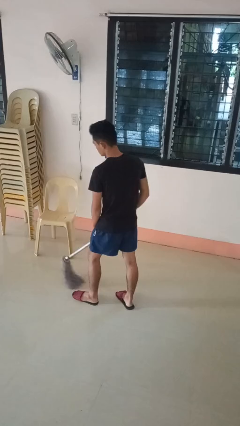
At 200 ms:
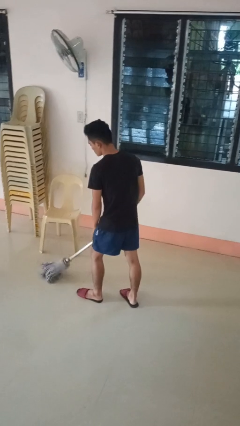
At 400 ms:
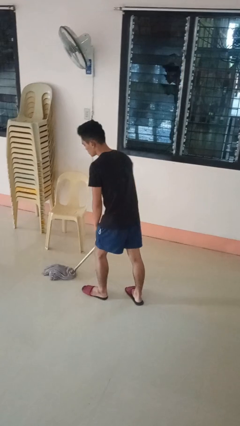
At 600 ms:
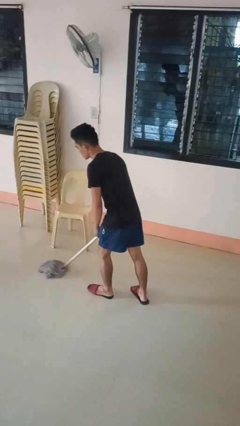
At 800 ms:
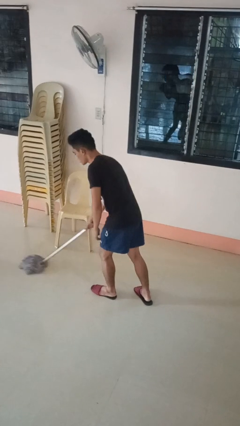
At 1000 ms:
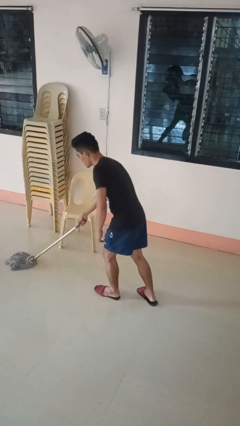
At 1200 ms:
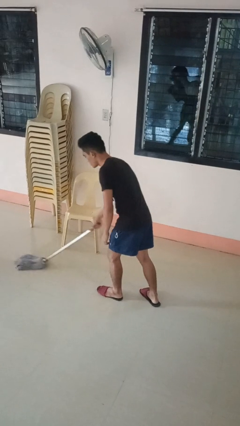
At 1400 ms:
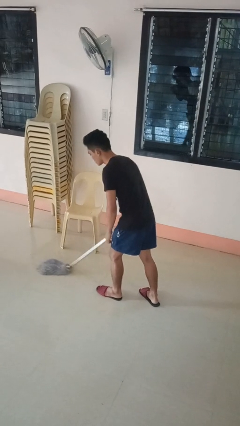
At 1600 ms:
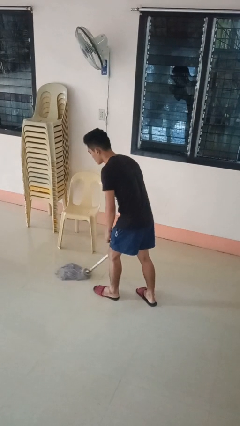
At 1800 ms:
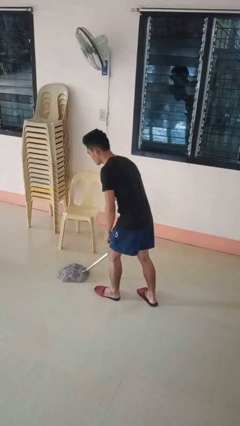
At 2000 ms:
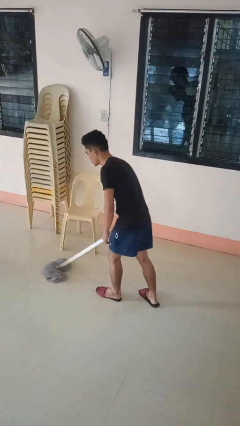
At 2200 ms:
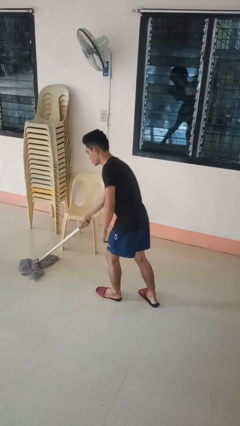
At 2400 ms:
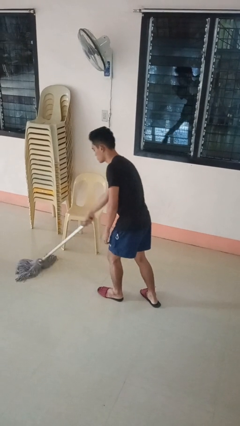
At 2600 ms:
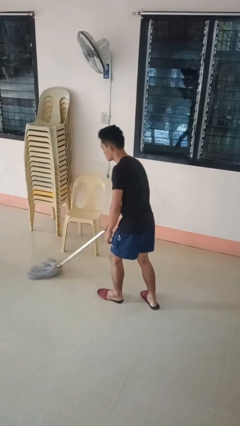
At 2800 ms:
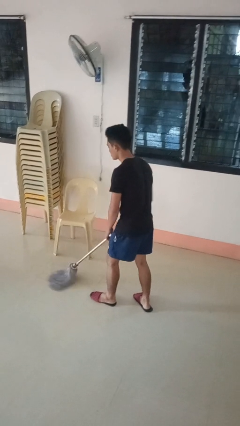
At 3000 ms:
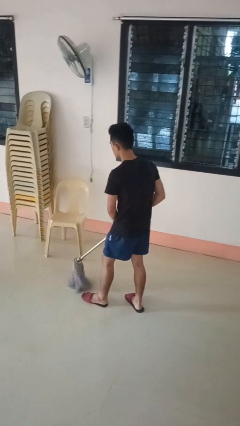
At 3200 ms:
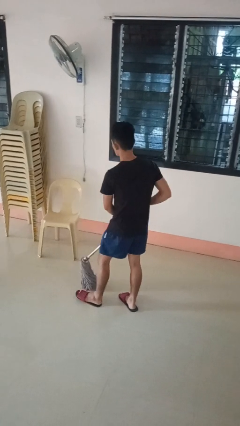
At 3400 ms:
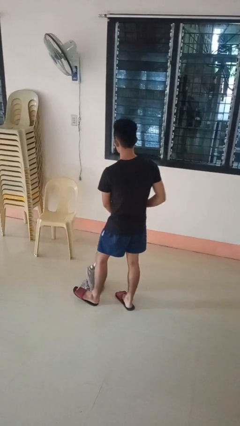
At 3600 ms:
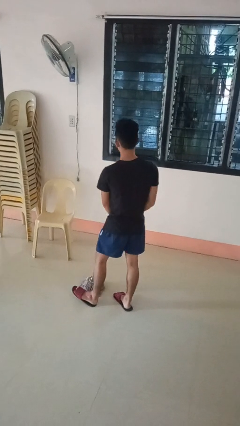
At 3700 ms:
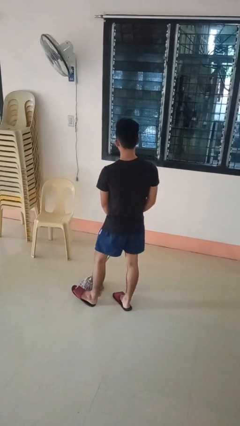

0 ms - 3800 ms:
person mops

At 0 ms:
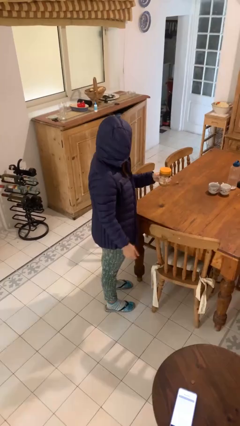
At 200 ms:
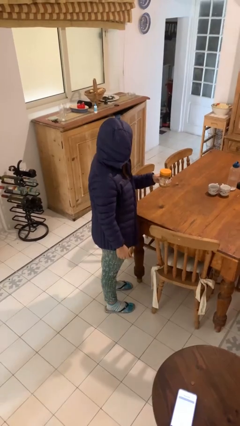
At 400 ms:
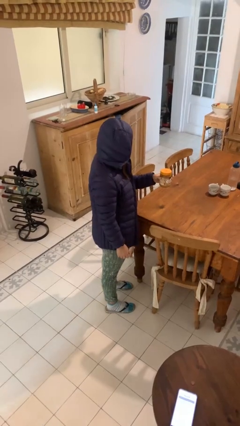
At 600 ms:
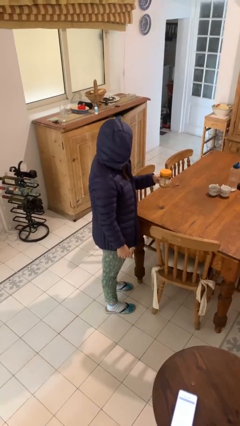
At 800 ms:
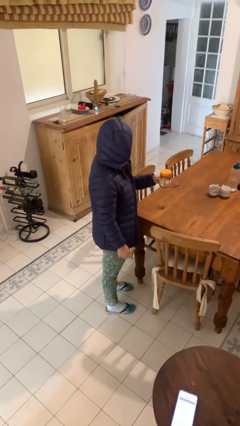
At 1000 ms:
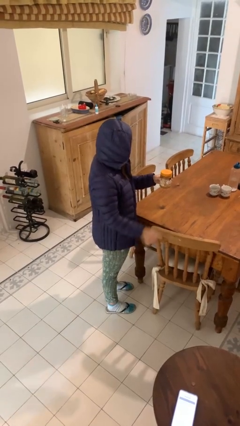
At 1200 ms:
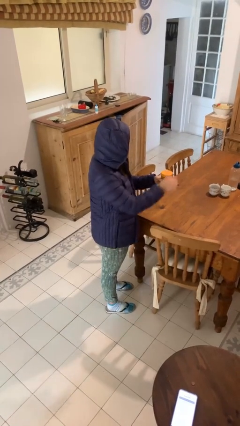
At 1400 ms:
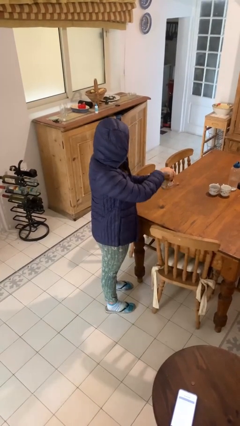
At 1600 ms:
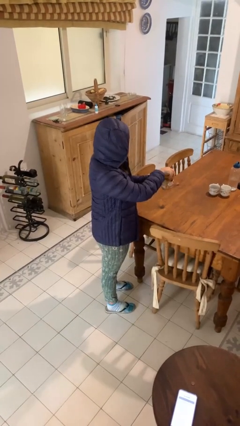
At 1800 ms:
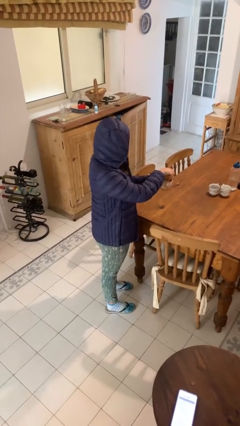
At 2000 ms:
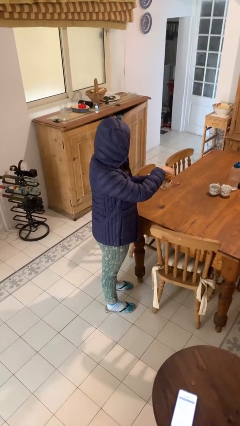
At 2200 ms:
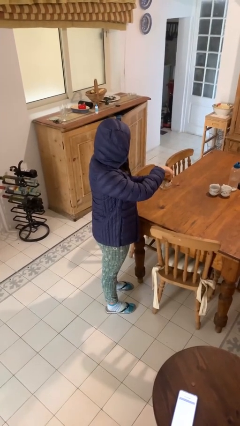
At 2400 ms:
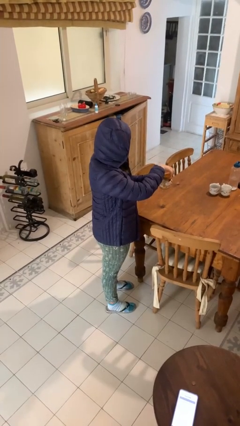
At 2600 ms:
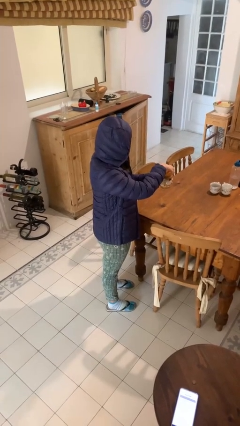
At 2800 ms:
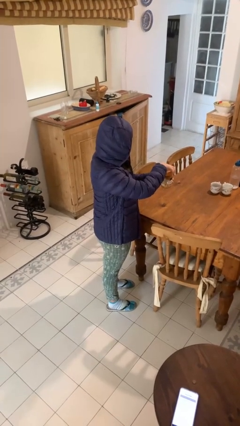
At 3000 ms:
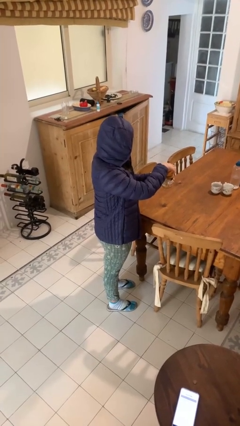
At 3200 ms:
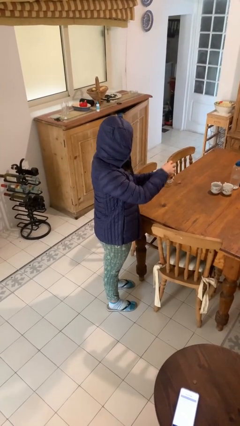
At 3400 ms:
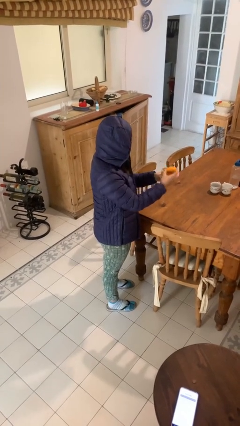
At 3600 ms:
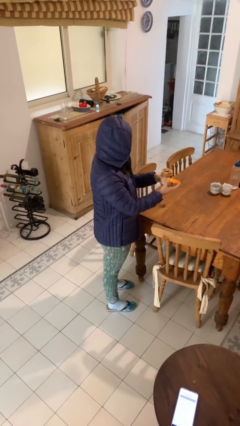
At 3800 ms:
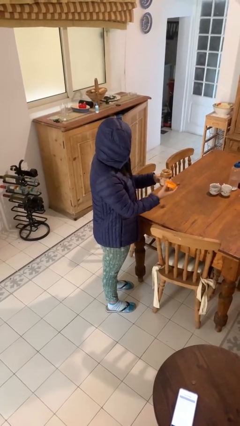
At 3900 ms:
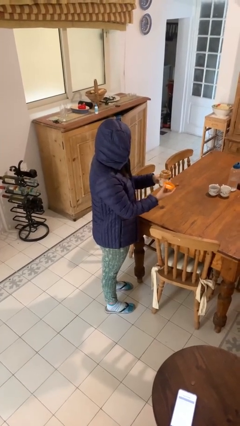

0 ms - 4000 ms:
person opens jar

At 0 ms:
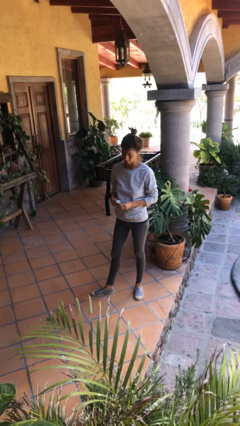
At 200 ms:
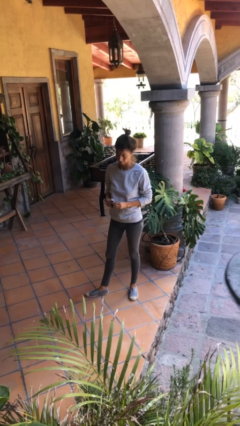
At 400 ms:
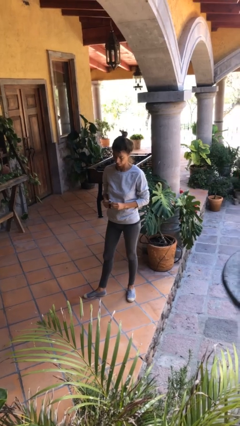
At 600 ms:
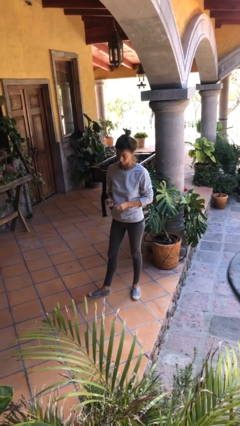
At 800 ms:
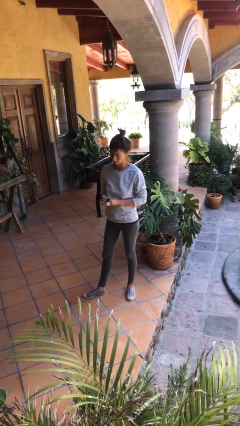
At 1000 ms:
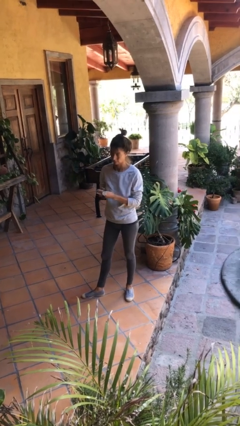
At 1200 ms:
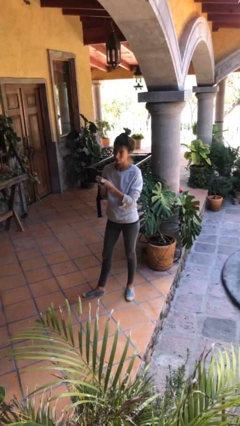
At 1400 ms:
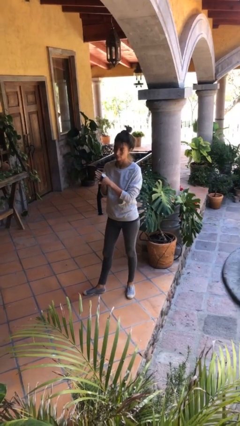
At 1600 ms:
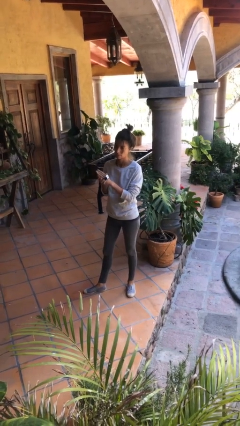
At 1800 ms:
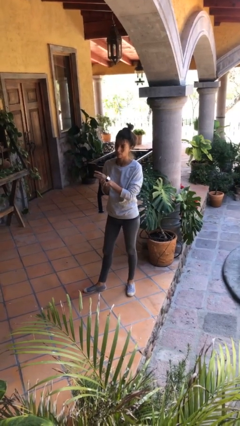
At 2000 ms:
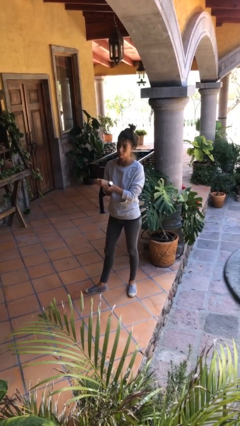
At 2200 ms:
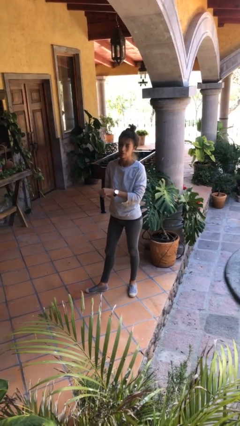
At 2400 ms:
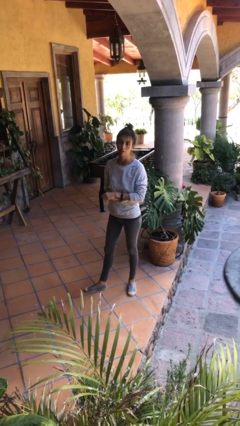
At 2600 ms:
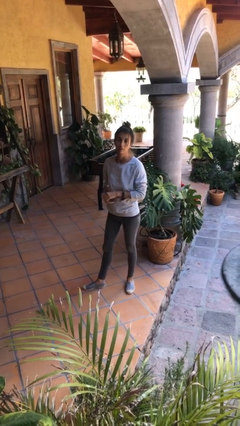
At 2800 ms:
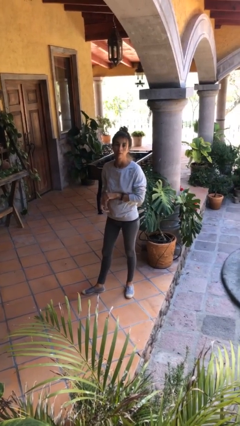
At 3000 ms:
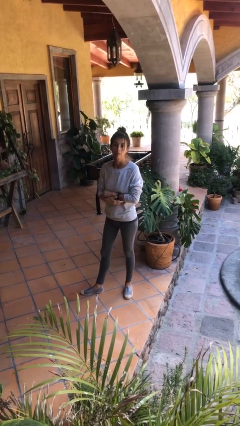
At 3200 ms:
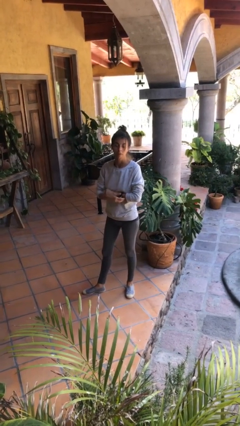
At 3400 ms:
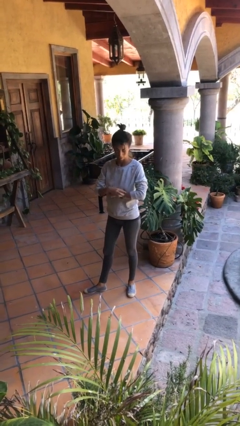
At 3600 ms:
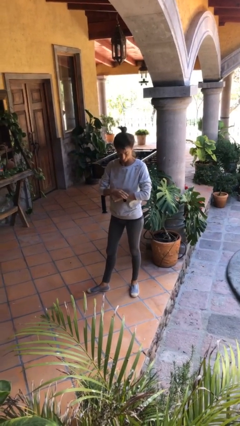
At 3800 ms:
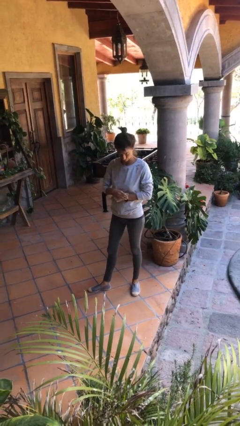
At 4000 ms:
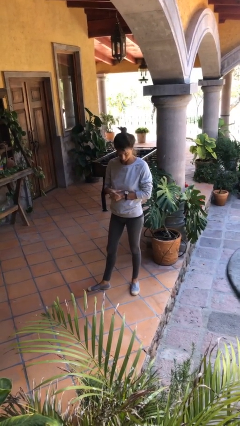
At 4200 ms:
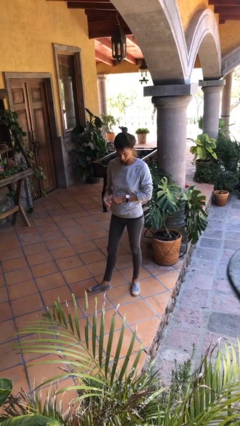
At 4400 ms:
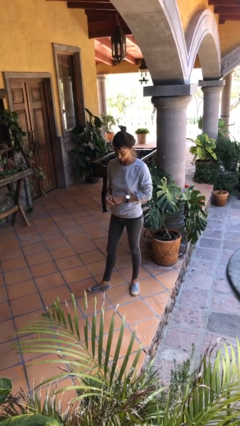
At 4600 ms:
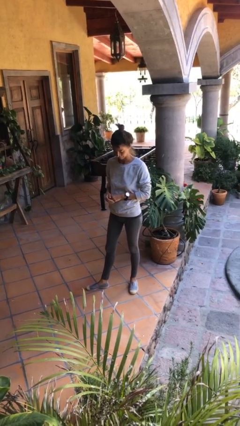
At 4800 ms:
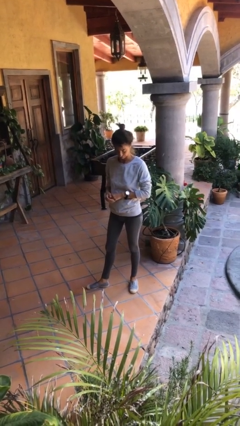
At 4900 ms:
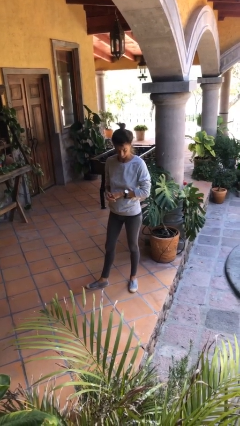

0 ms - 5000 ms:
person puts on wristwatch

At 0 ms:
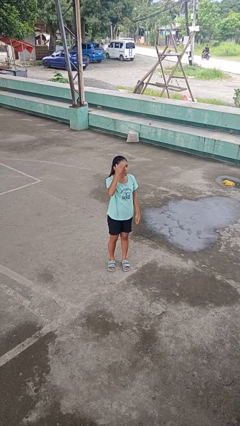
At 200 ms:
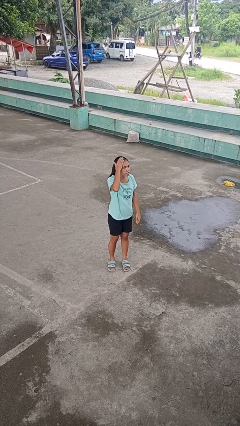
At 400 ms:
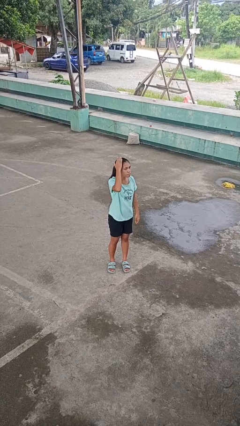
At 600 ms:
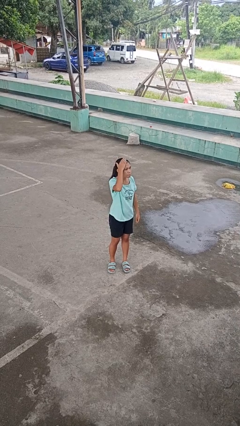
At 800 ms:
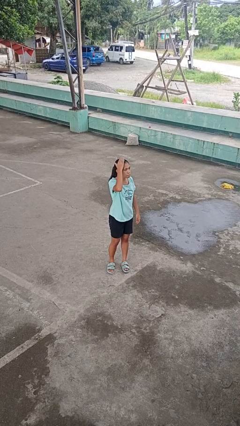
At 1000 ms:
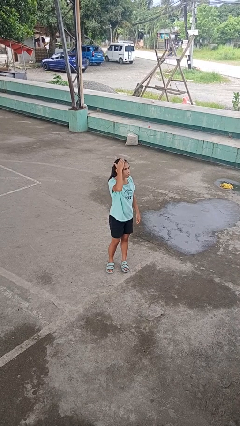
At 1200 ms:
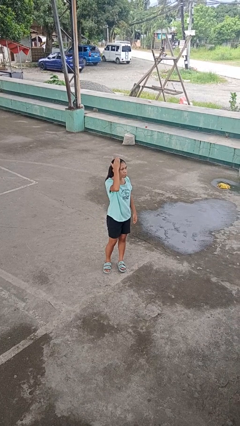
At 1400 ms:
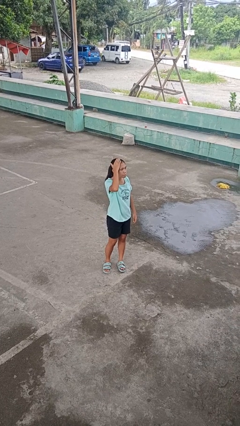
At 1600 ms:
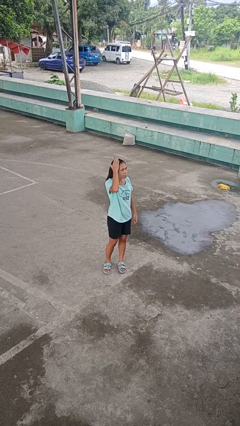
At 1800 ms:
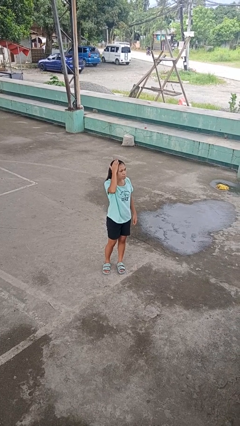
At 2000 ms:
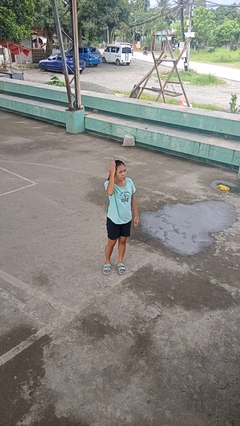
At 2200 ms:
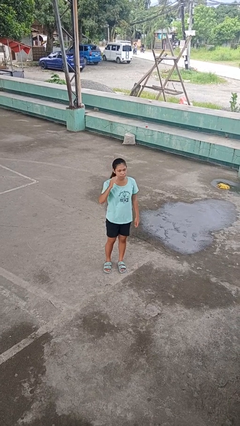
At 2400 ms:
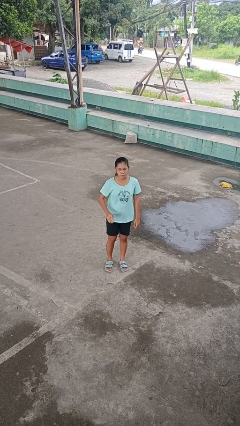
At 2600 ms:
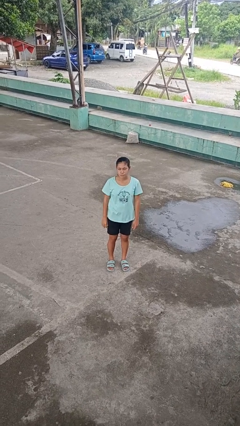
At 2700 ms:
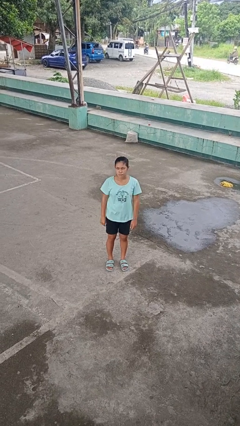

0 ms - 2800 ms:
person pats head

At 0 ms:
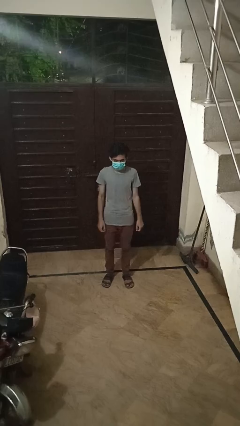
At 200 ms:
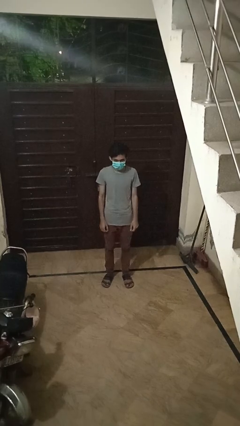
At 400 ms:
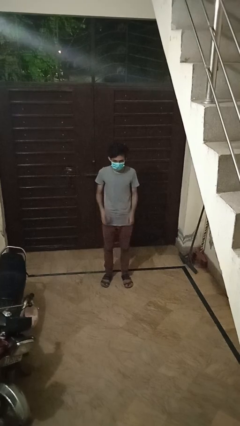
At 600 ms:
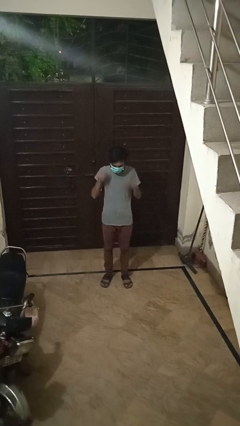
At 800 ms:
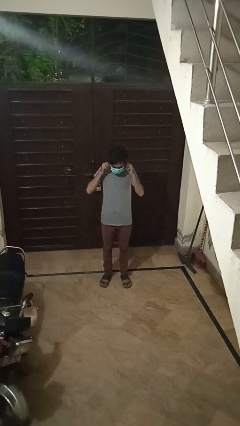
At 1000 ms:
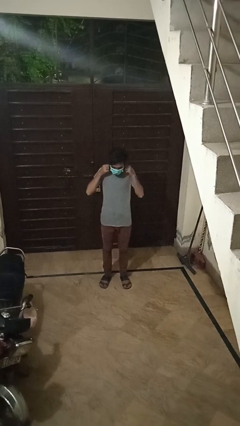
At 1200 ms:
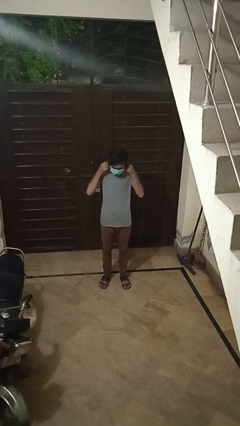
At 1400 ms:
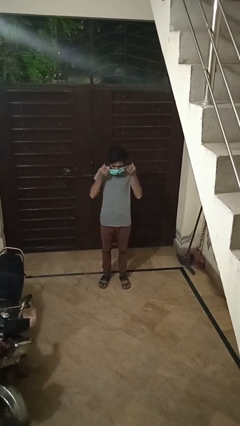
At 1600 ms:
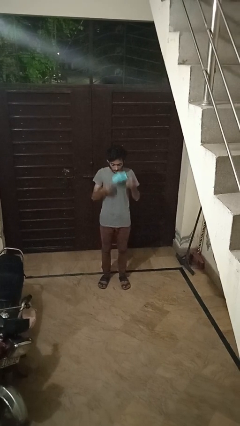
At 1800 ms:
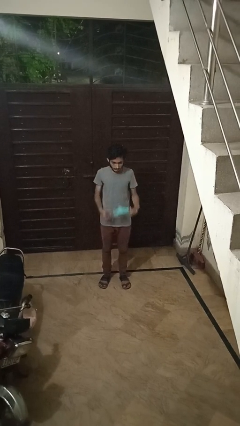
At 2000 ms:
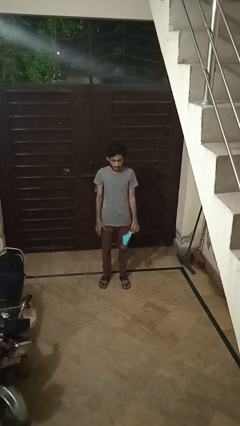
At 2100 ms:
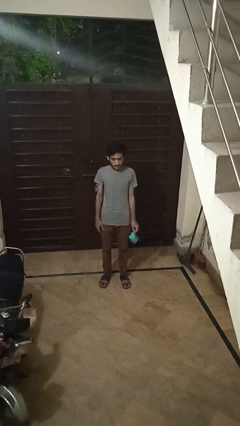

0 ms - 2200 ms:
person takes off facemask
